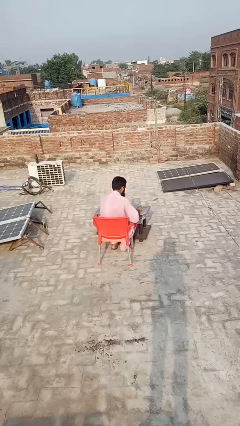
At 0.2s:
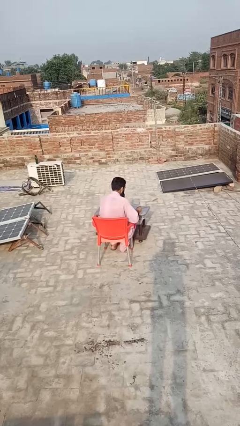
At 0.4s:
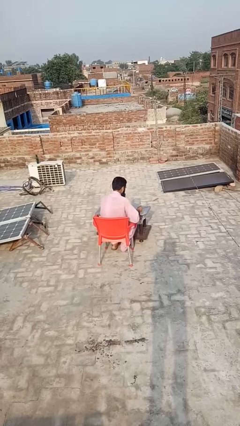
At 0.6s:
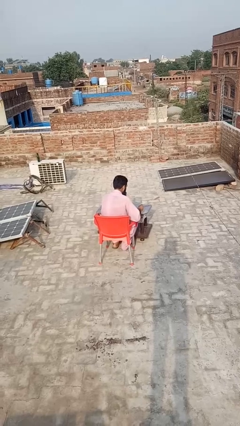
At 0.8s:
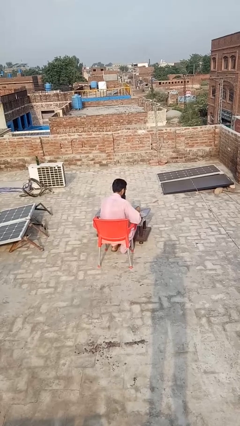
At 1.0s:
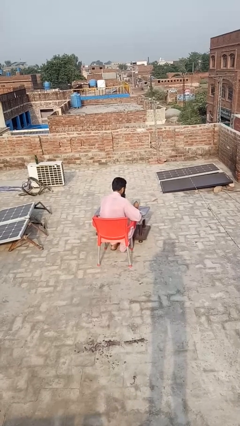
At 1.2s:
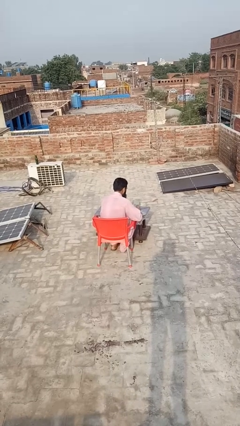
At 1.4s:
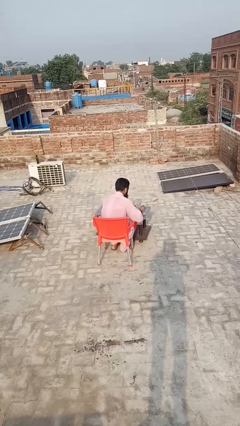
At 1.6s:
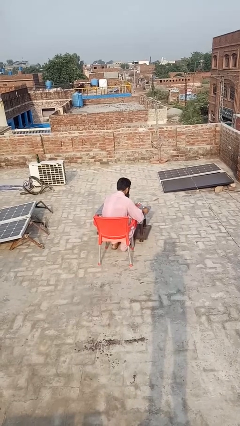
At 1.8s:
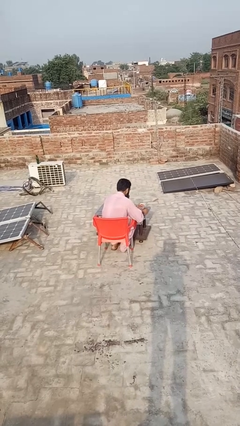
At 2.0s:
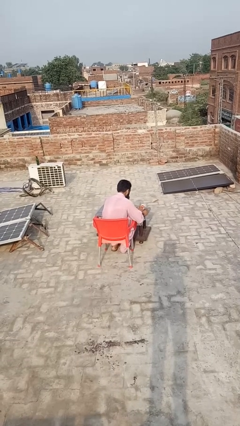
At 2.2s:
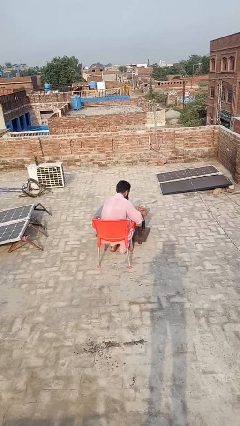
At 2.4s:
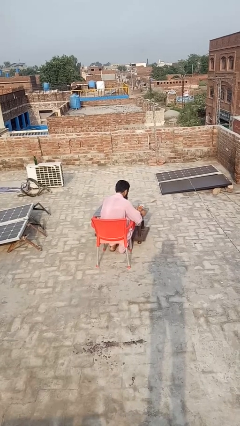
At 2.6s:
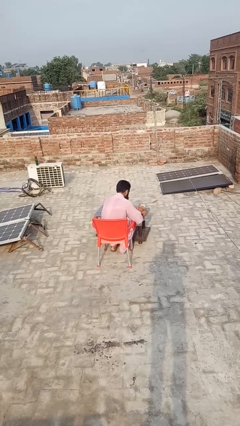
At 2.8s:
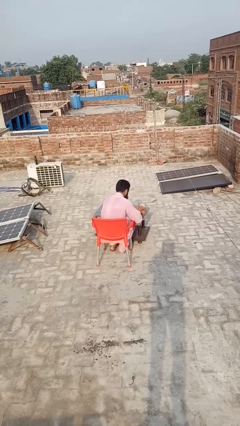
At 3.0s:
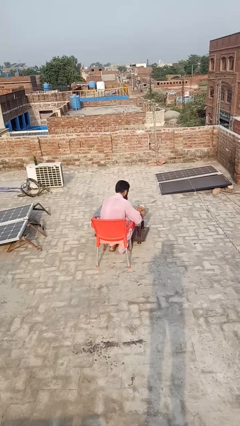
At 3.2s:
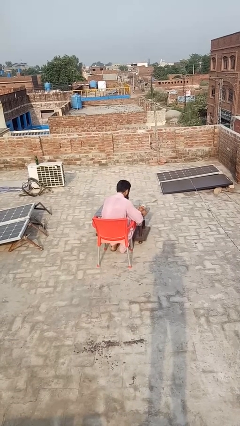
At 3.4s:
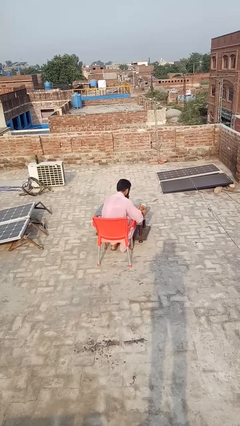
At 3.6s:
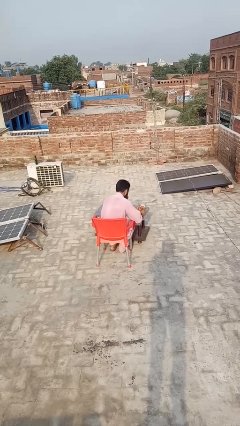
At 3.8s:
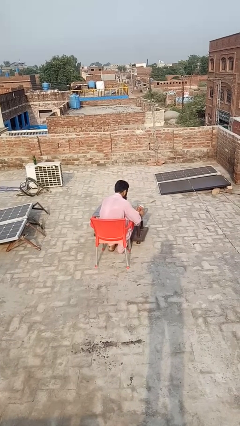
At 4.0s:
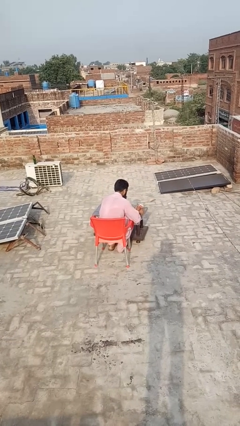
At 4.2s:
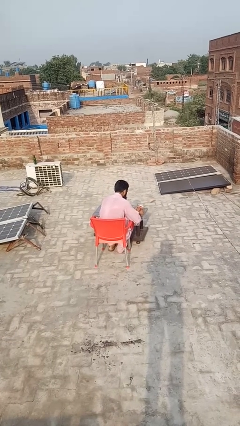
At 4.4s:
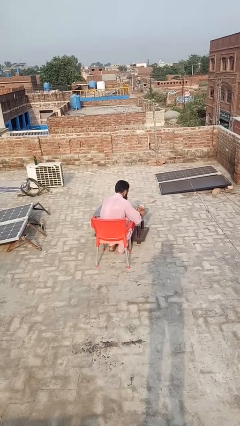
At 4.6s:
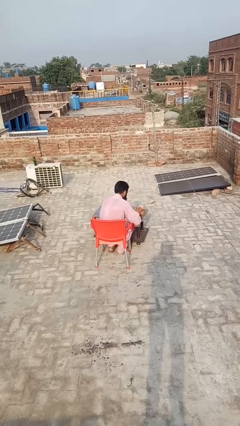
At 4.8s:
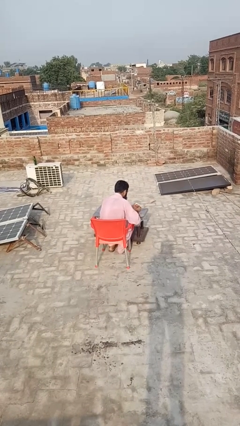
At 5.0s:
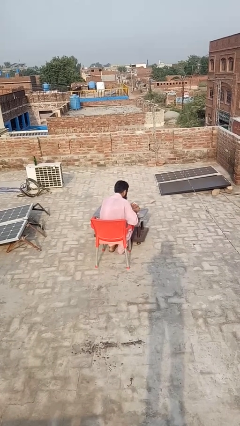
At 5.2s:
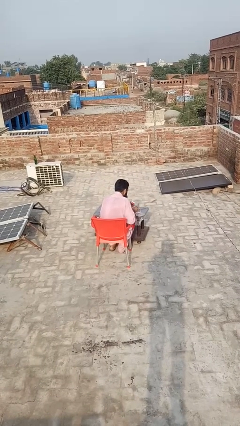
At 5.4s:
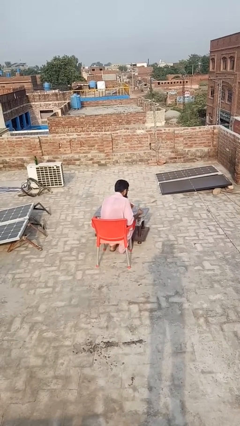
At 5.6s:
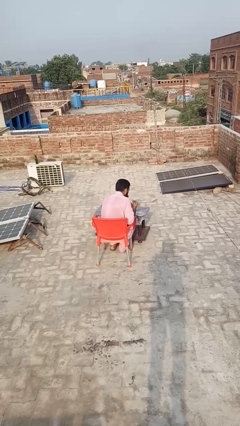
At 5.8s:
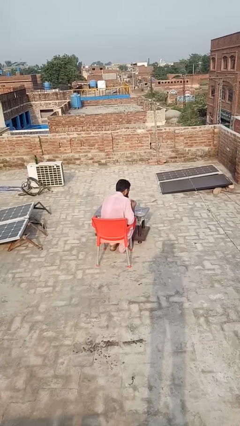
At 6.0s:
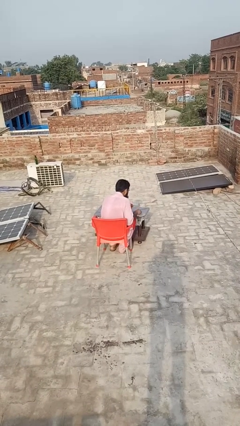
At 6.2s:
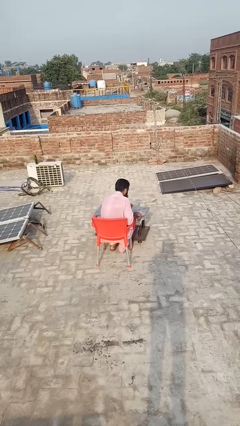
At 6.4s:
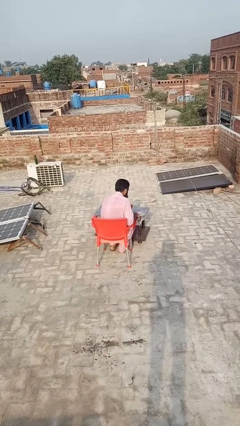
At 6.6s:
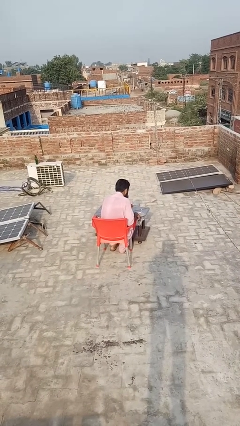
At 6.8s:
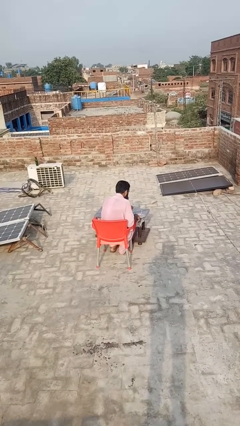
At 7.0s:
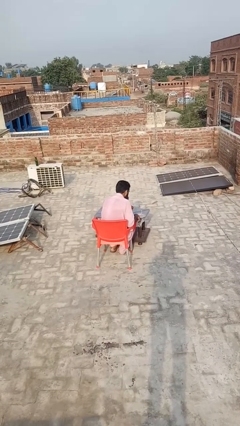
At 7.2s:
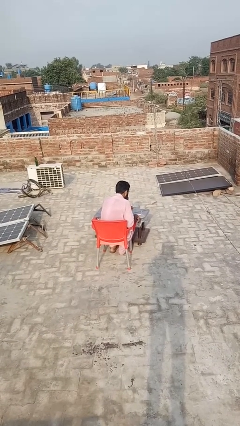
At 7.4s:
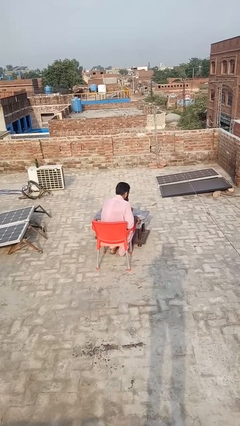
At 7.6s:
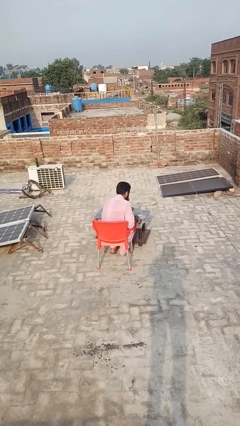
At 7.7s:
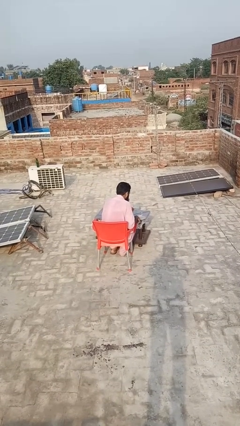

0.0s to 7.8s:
person lights candle

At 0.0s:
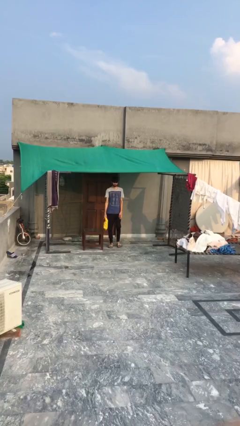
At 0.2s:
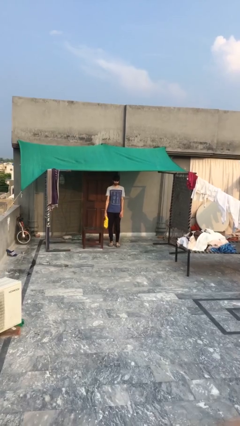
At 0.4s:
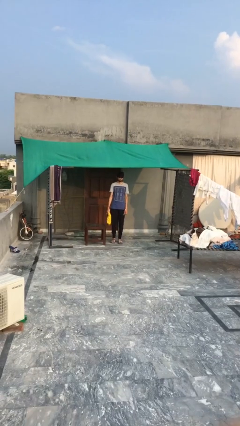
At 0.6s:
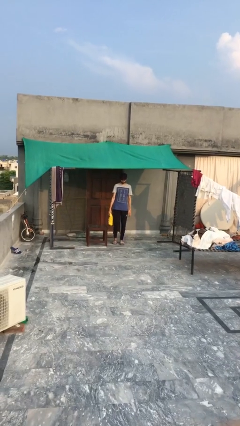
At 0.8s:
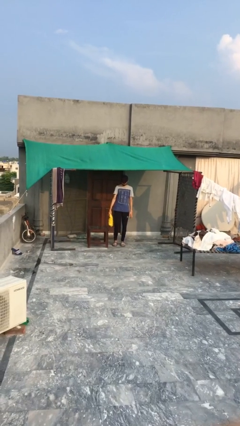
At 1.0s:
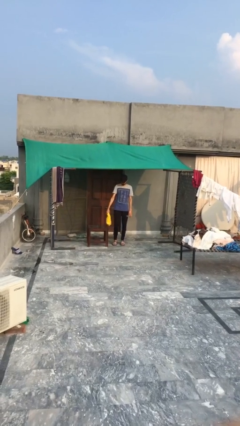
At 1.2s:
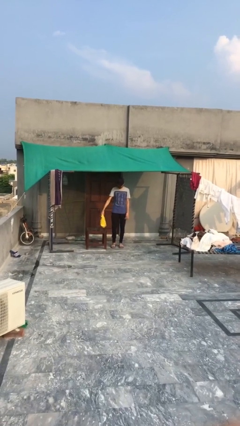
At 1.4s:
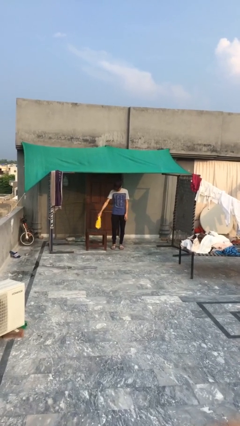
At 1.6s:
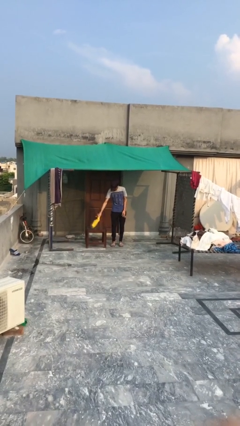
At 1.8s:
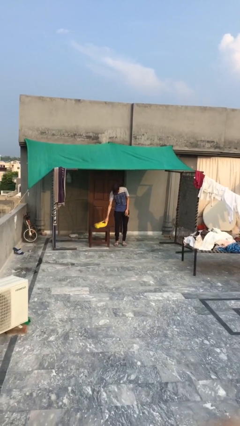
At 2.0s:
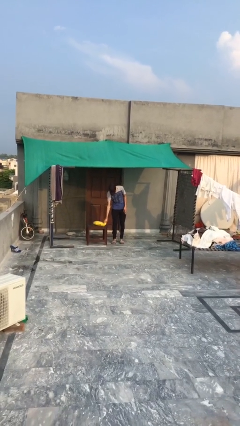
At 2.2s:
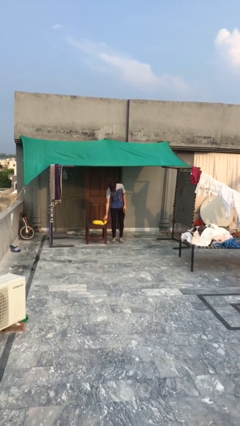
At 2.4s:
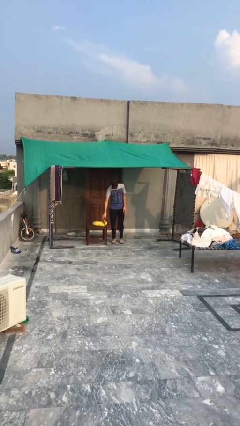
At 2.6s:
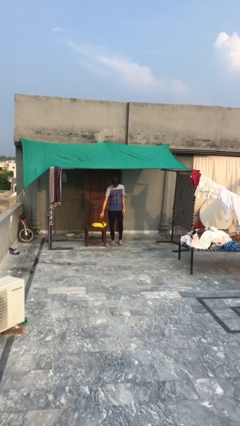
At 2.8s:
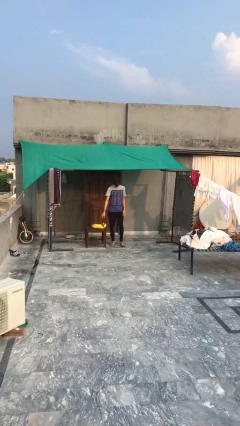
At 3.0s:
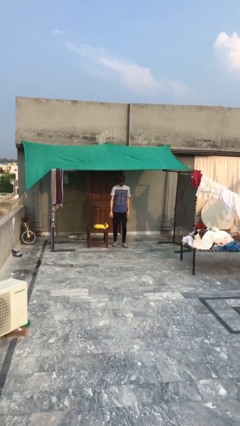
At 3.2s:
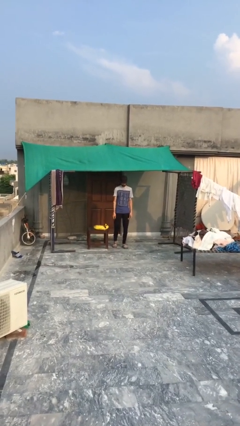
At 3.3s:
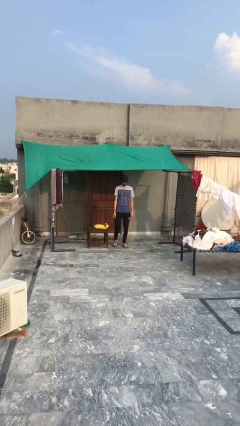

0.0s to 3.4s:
person puts down object on table

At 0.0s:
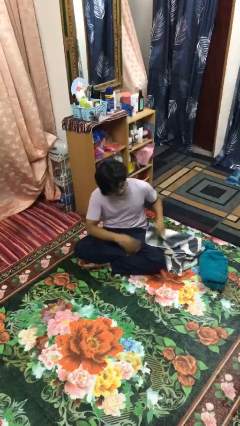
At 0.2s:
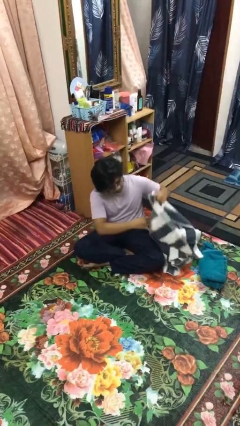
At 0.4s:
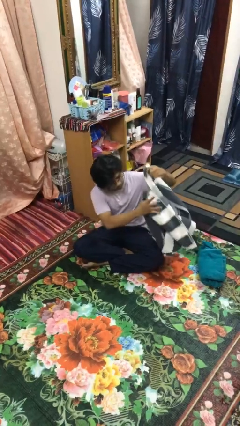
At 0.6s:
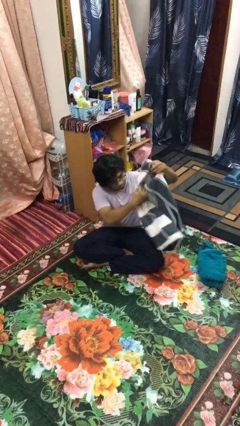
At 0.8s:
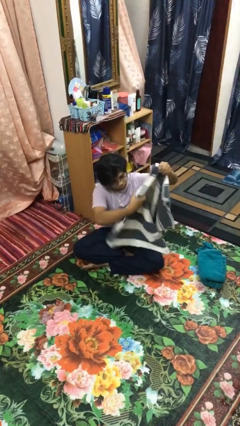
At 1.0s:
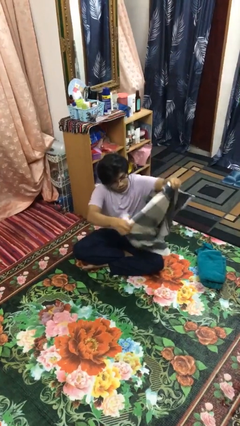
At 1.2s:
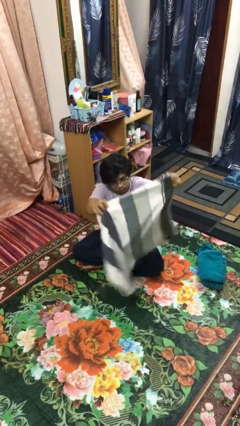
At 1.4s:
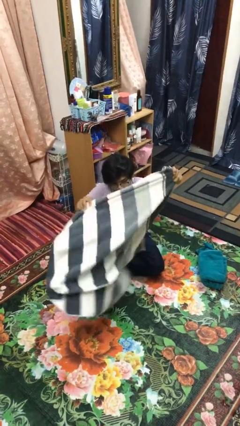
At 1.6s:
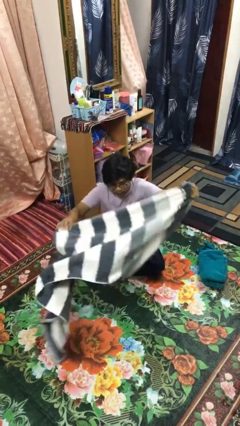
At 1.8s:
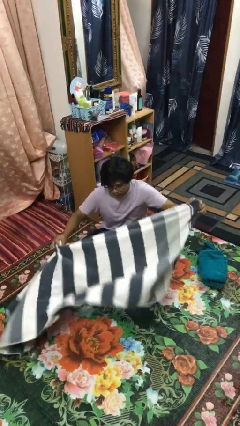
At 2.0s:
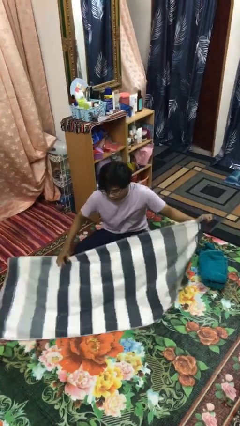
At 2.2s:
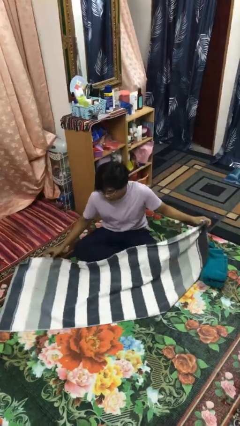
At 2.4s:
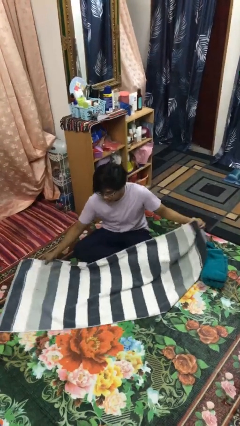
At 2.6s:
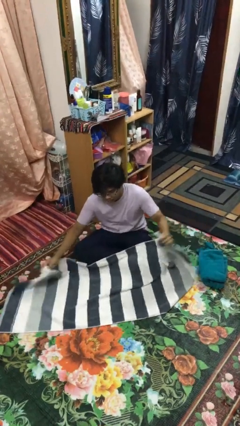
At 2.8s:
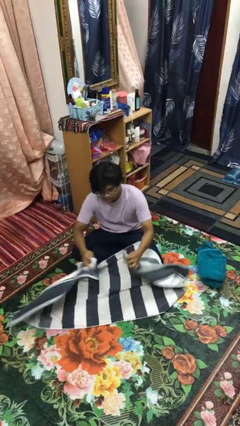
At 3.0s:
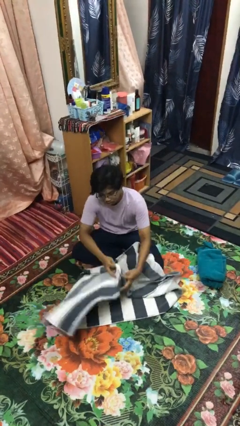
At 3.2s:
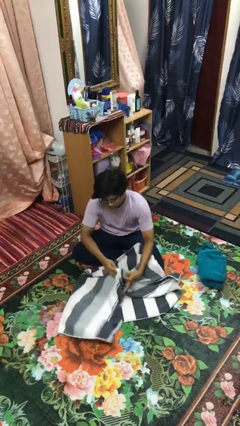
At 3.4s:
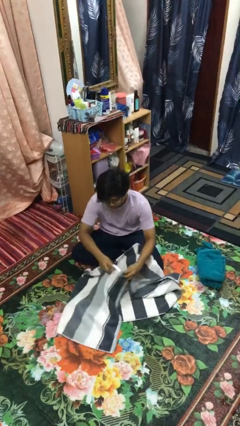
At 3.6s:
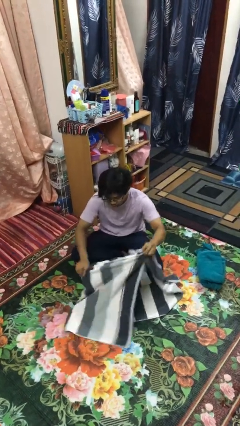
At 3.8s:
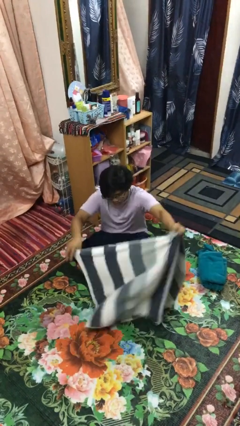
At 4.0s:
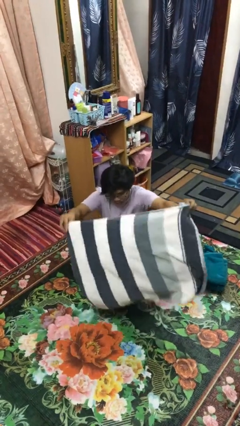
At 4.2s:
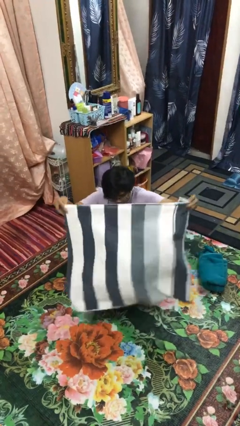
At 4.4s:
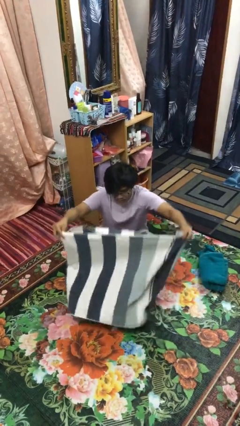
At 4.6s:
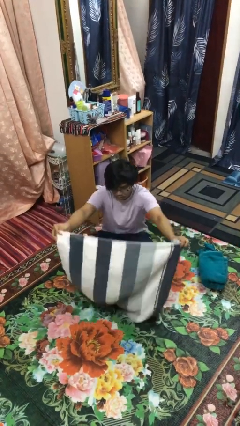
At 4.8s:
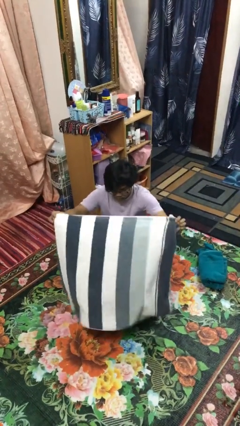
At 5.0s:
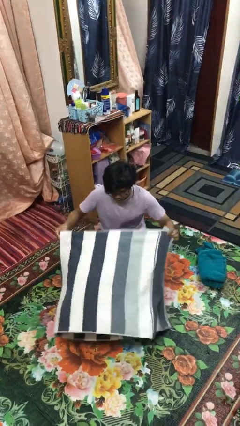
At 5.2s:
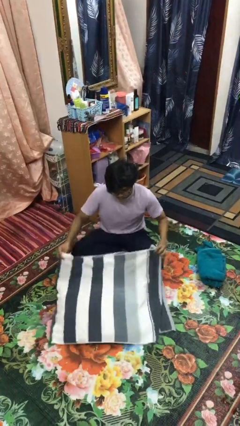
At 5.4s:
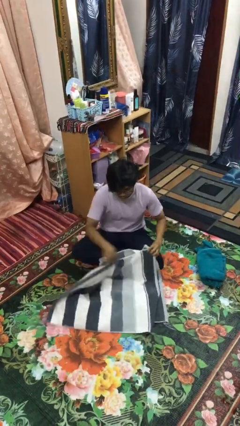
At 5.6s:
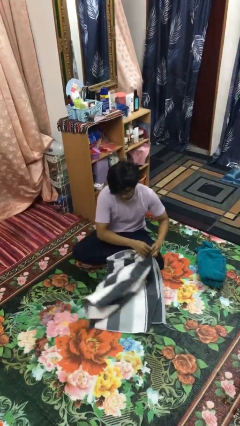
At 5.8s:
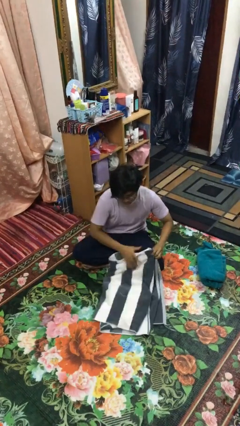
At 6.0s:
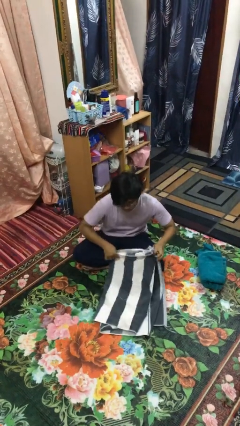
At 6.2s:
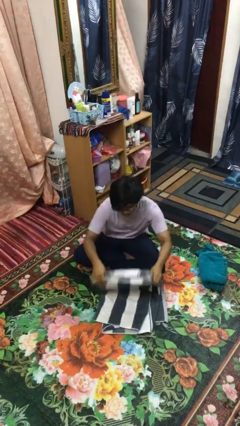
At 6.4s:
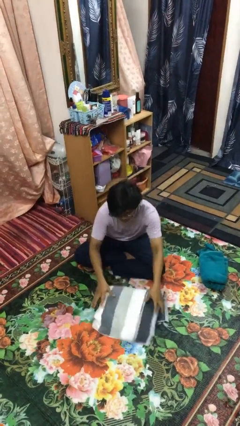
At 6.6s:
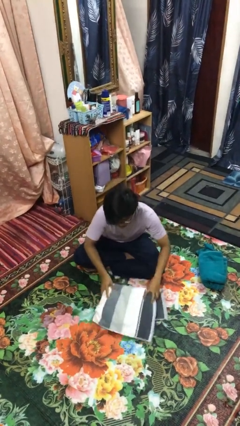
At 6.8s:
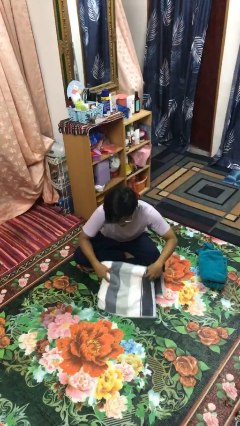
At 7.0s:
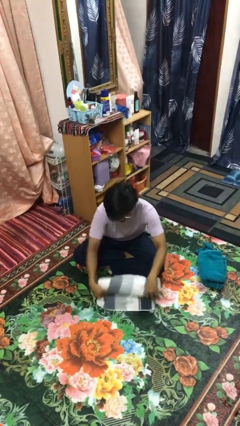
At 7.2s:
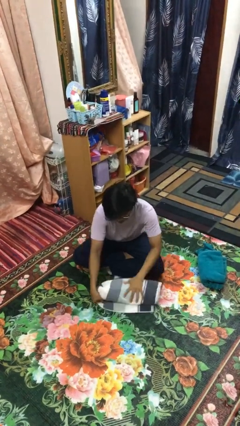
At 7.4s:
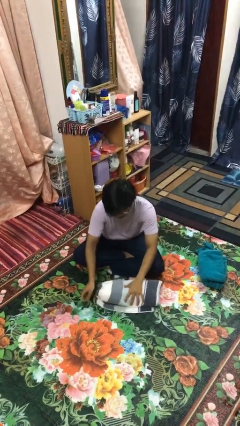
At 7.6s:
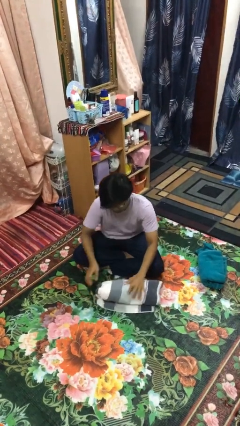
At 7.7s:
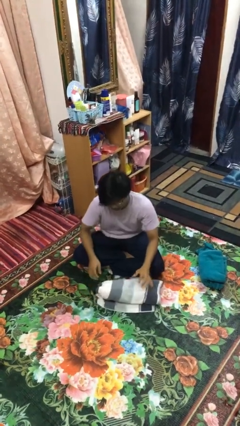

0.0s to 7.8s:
person folds towel
